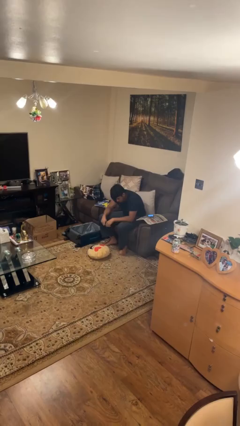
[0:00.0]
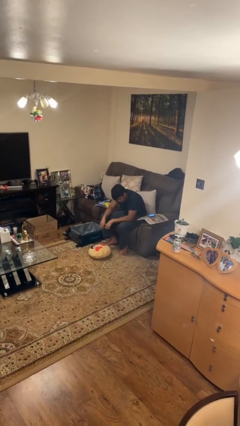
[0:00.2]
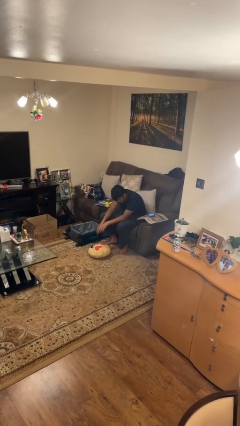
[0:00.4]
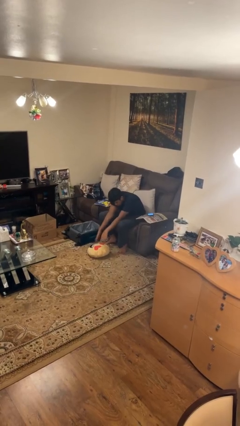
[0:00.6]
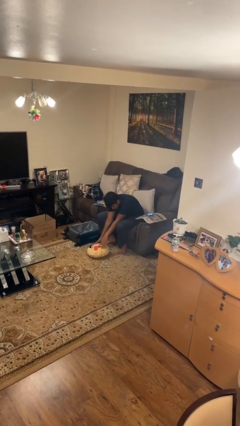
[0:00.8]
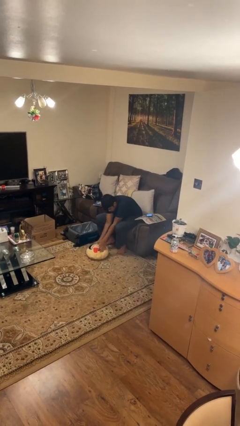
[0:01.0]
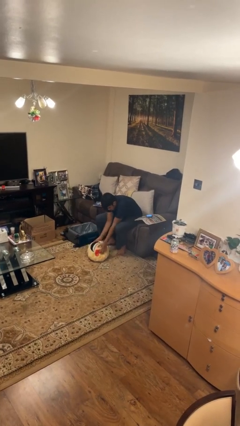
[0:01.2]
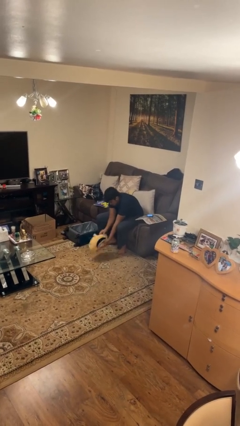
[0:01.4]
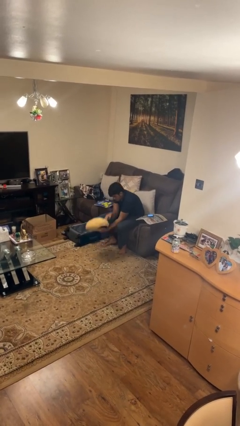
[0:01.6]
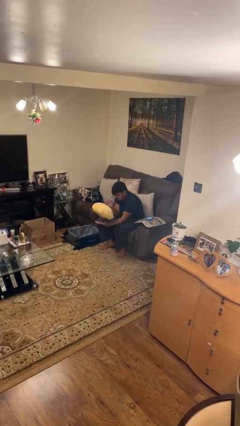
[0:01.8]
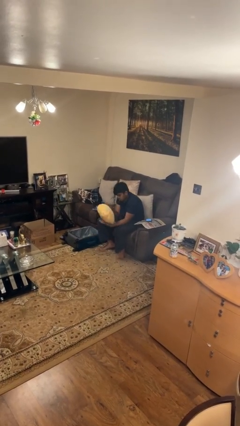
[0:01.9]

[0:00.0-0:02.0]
person picks up object from floor

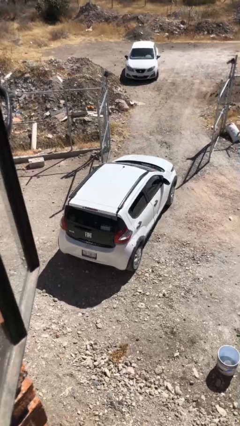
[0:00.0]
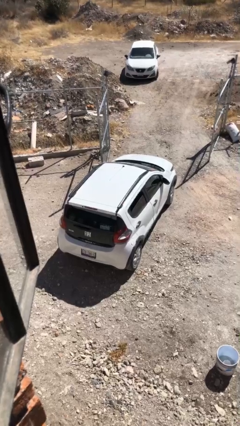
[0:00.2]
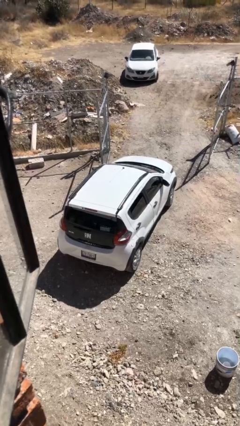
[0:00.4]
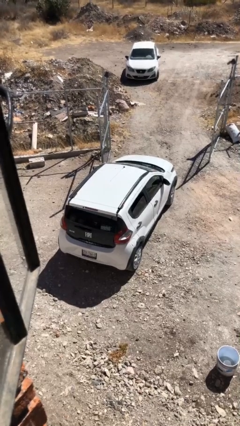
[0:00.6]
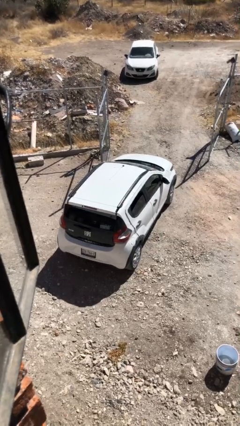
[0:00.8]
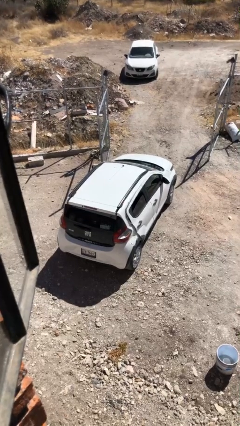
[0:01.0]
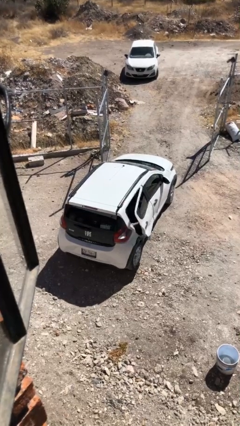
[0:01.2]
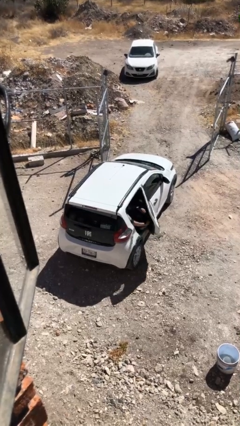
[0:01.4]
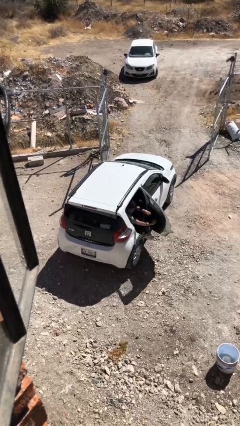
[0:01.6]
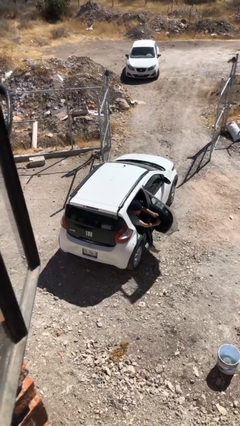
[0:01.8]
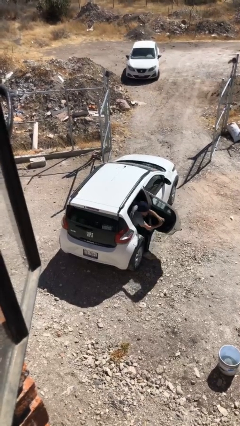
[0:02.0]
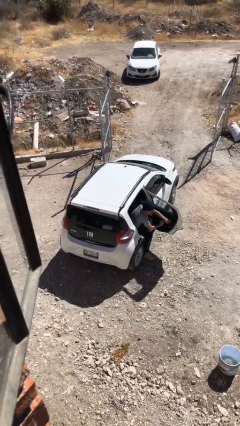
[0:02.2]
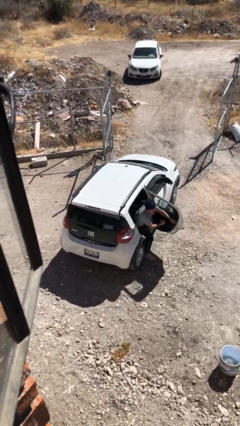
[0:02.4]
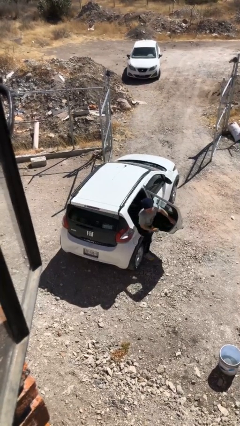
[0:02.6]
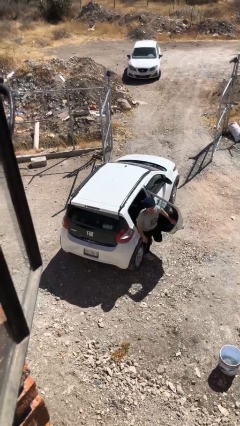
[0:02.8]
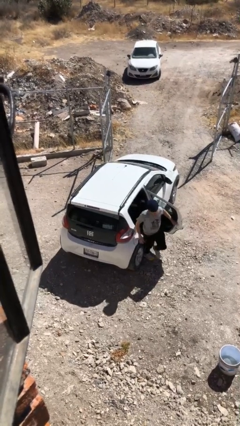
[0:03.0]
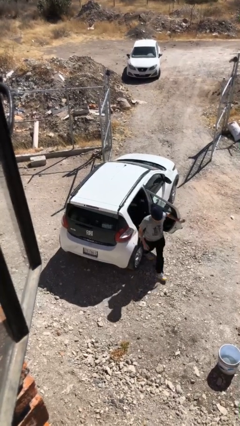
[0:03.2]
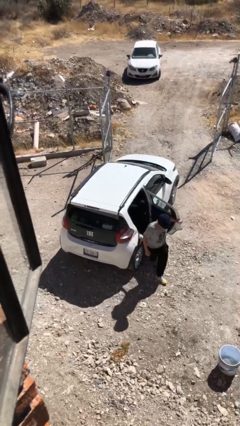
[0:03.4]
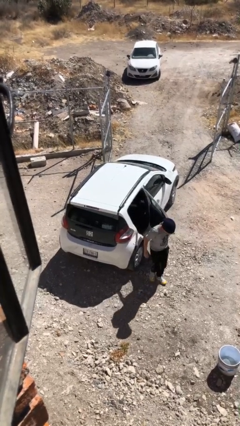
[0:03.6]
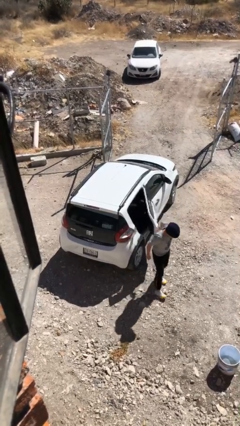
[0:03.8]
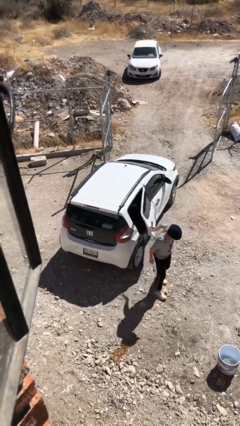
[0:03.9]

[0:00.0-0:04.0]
car drops off person

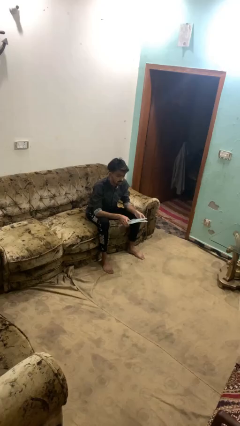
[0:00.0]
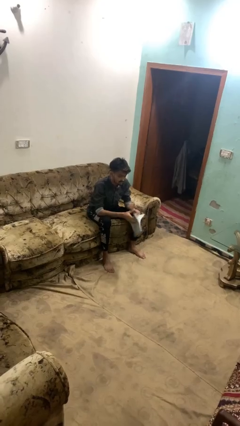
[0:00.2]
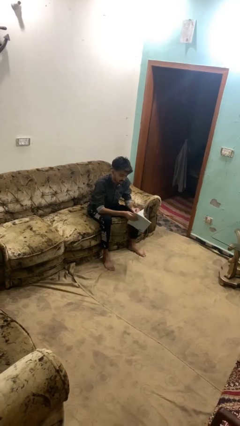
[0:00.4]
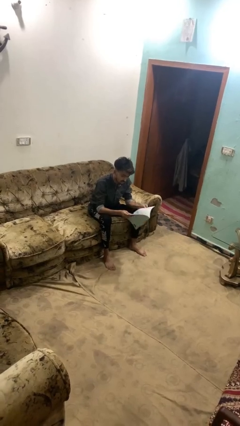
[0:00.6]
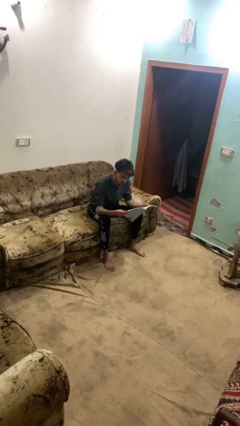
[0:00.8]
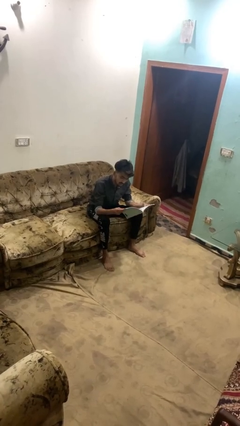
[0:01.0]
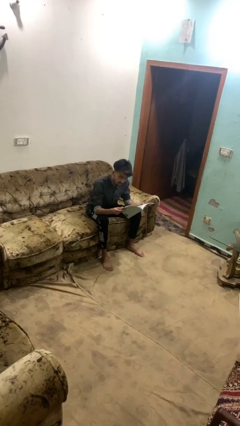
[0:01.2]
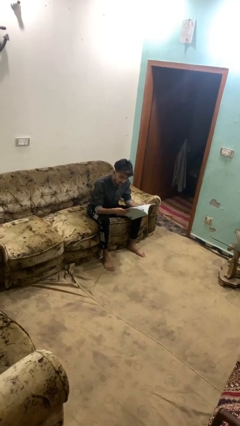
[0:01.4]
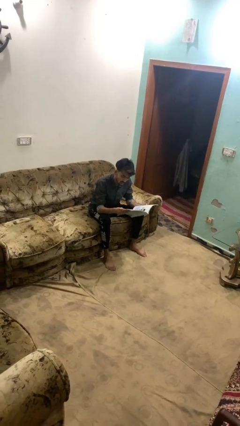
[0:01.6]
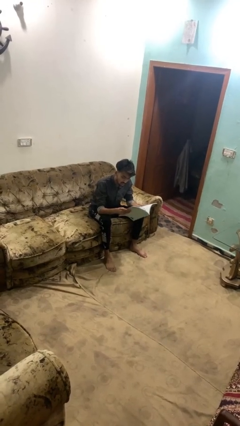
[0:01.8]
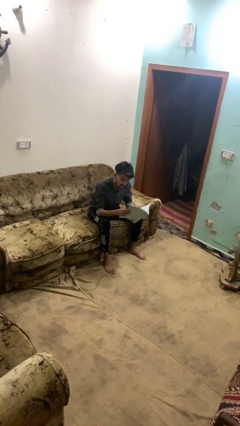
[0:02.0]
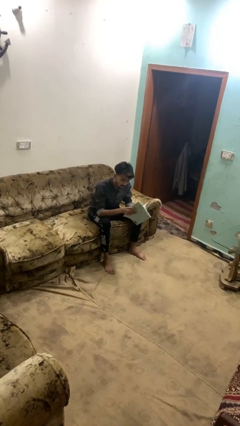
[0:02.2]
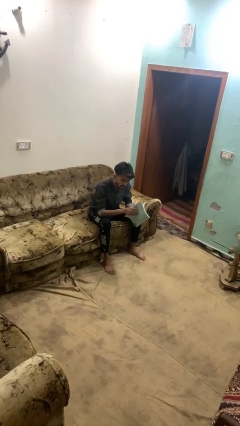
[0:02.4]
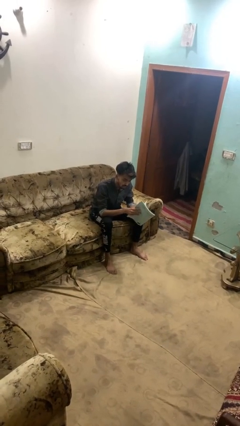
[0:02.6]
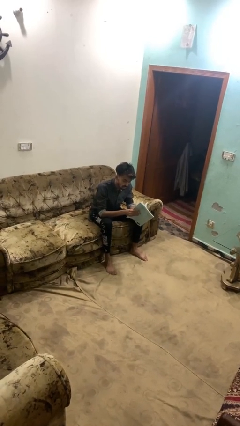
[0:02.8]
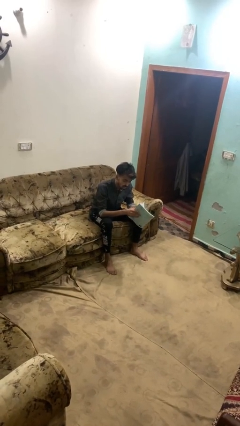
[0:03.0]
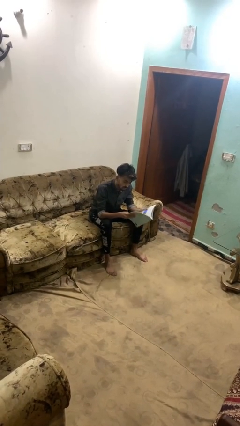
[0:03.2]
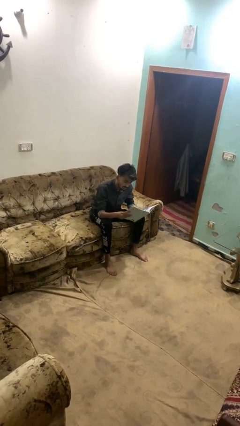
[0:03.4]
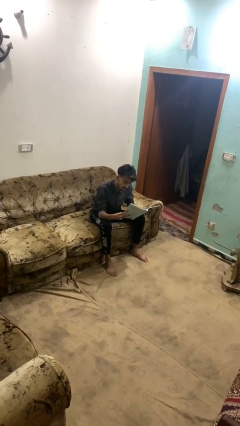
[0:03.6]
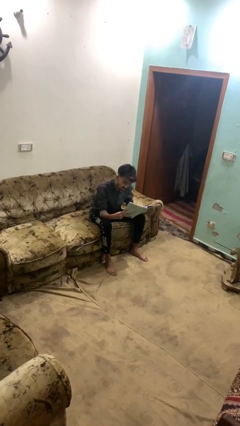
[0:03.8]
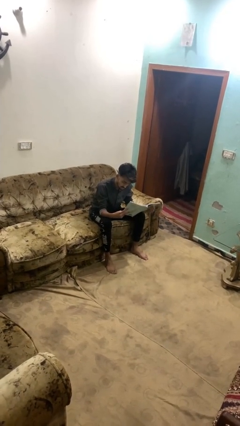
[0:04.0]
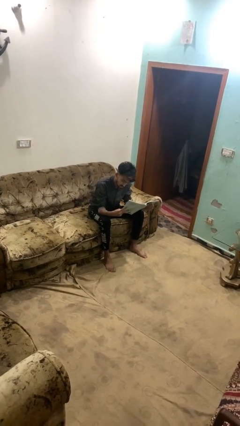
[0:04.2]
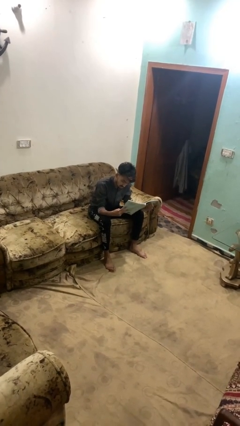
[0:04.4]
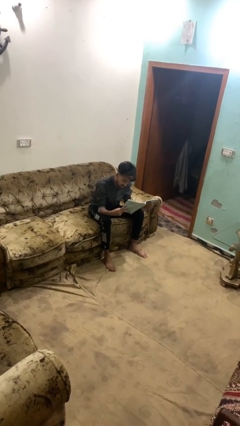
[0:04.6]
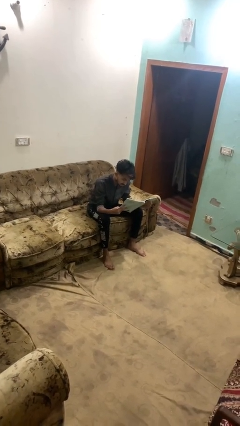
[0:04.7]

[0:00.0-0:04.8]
person reads magazine

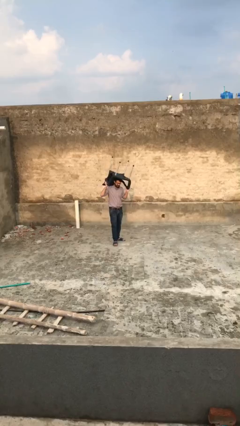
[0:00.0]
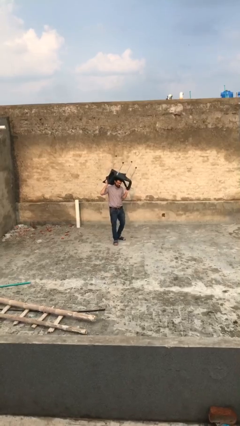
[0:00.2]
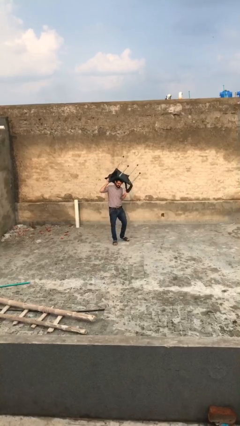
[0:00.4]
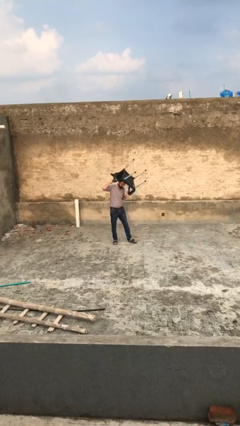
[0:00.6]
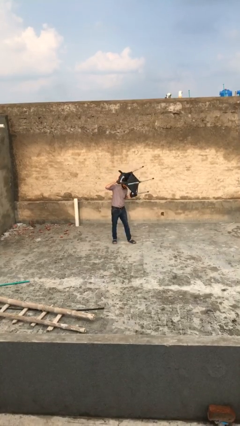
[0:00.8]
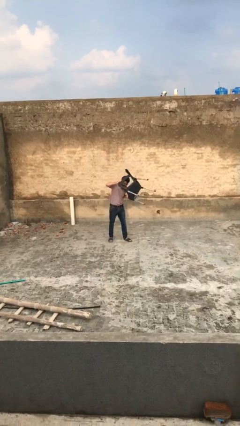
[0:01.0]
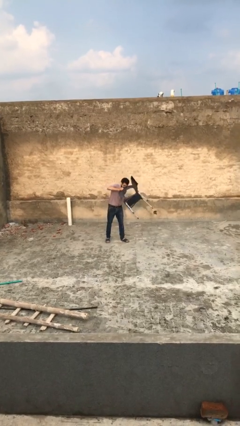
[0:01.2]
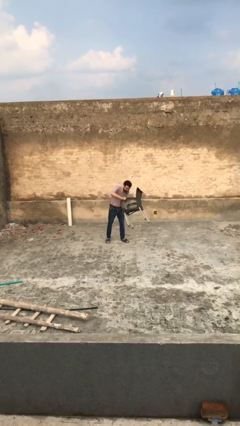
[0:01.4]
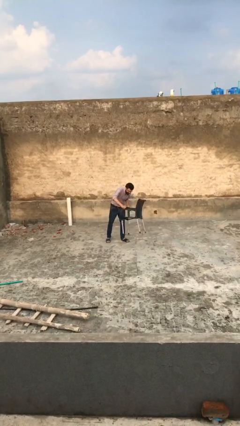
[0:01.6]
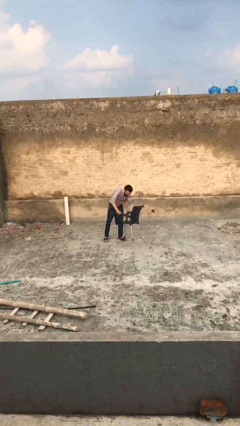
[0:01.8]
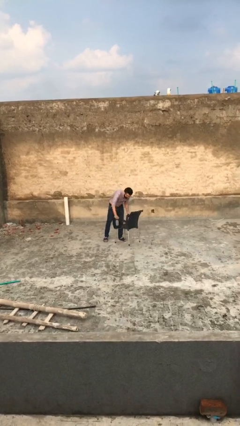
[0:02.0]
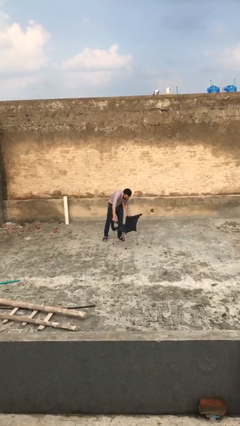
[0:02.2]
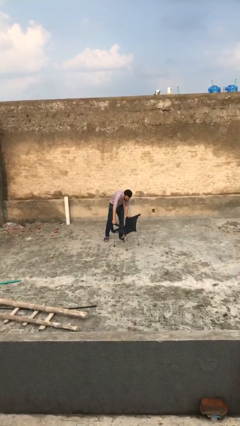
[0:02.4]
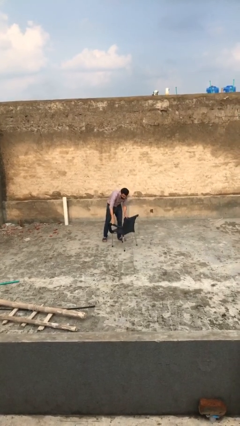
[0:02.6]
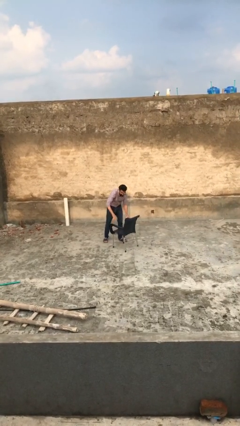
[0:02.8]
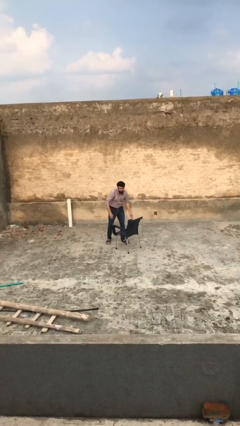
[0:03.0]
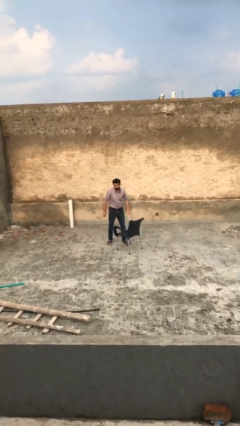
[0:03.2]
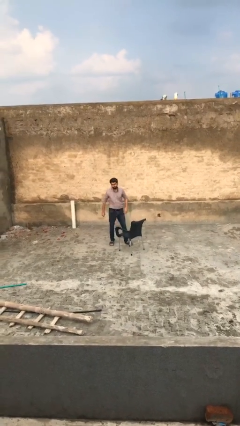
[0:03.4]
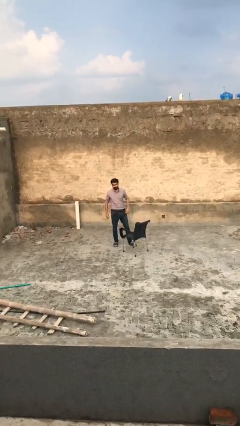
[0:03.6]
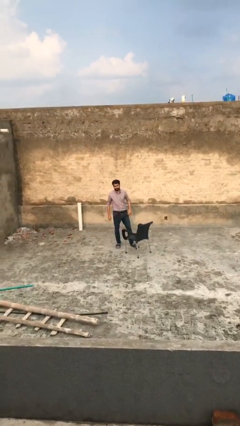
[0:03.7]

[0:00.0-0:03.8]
person puts down object on floor

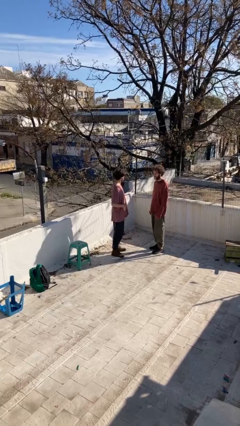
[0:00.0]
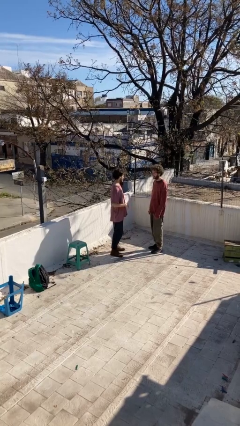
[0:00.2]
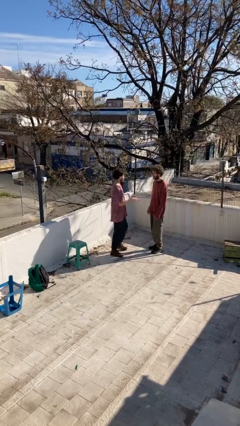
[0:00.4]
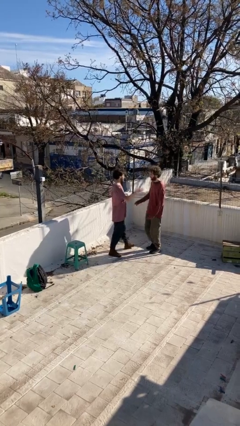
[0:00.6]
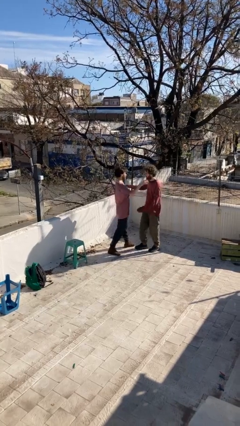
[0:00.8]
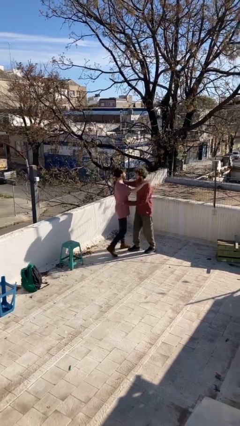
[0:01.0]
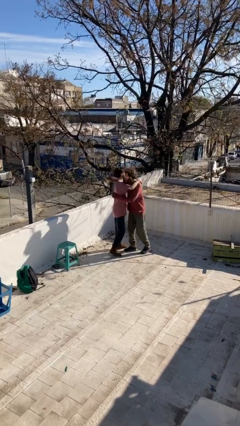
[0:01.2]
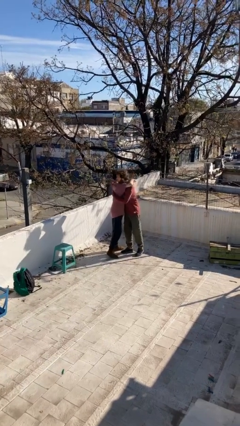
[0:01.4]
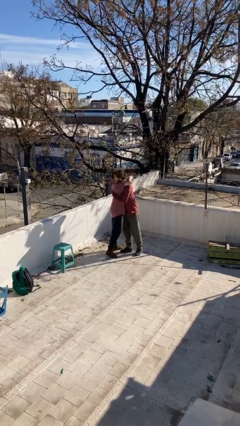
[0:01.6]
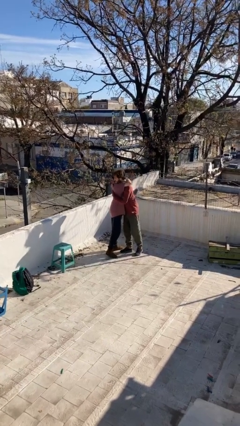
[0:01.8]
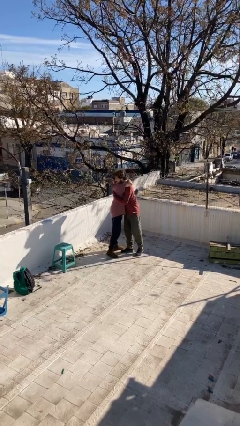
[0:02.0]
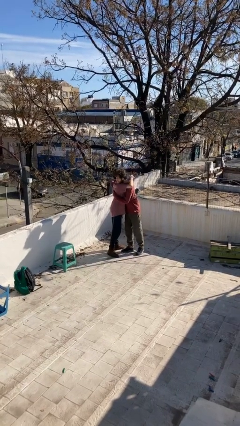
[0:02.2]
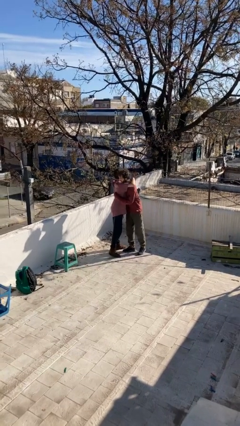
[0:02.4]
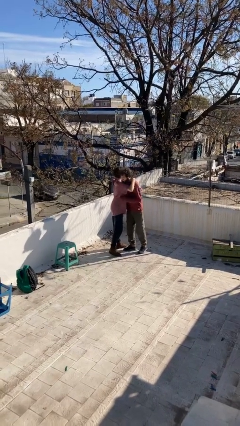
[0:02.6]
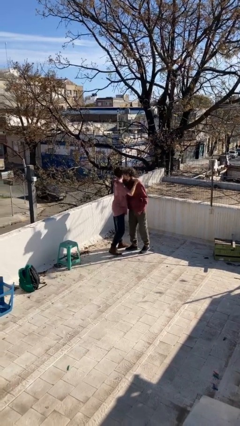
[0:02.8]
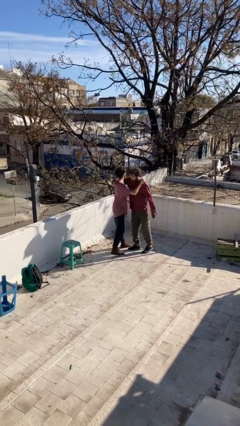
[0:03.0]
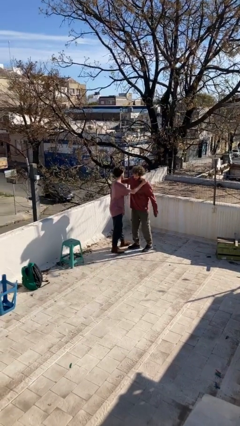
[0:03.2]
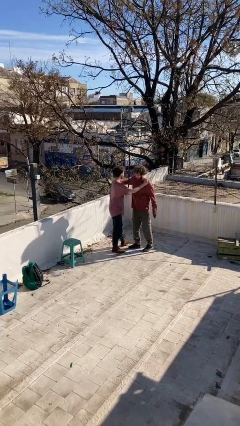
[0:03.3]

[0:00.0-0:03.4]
person embraces person
